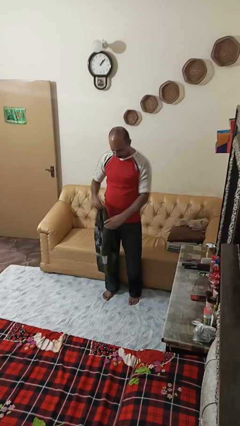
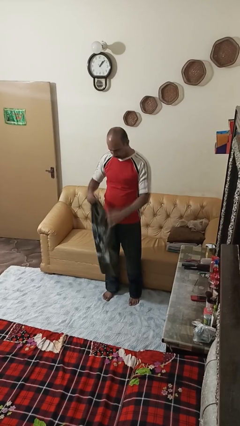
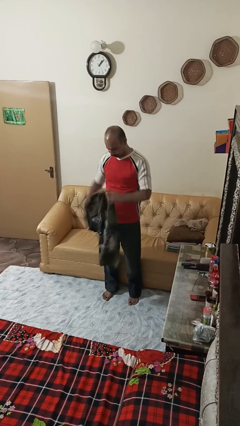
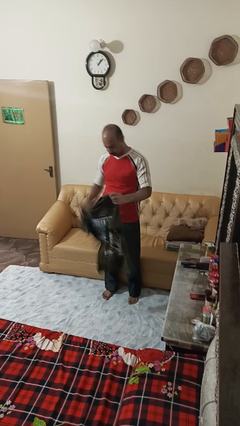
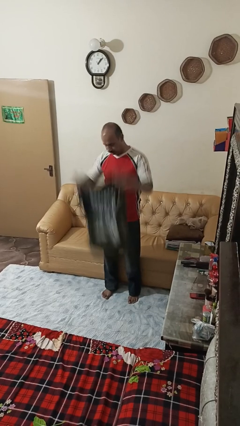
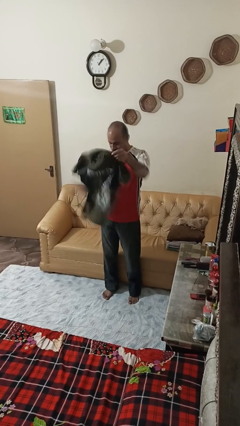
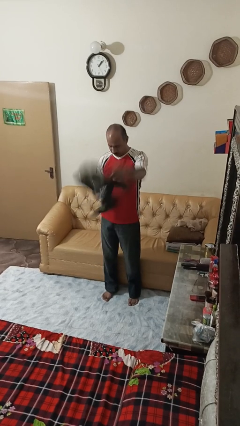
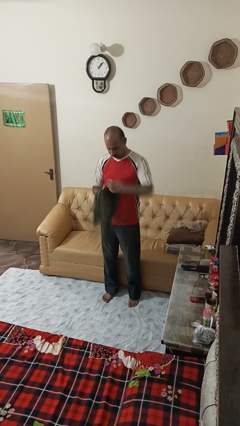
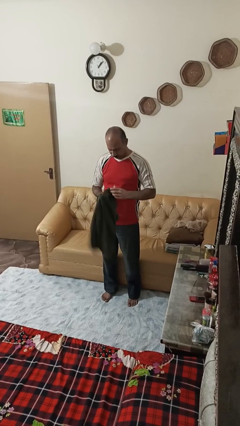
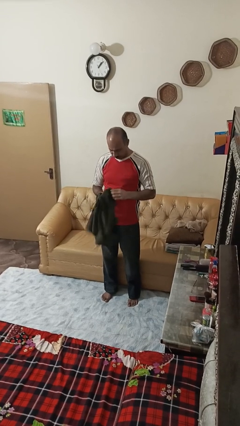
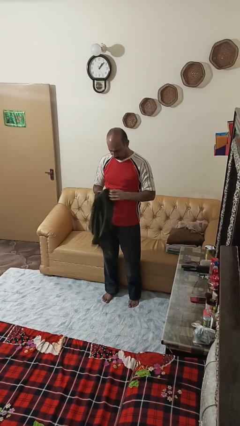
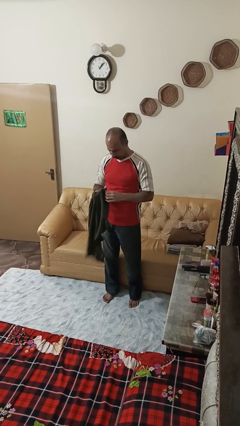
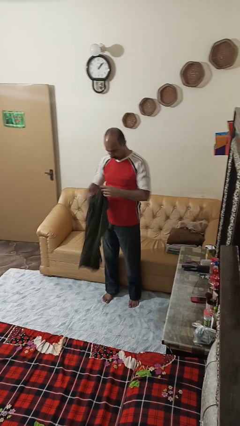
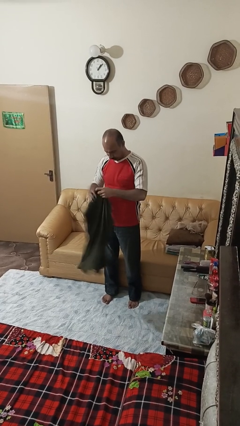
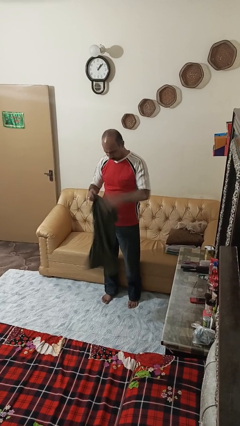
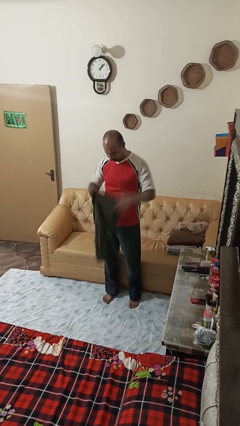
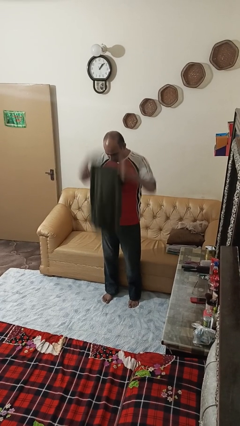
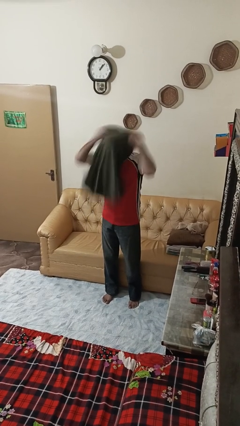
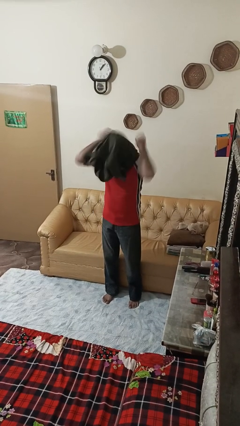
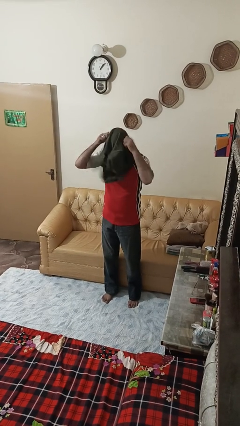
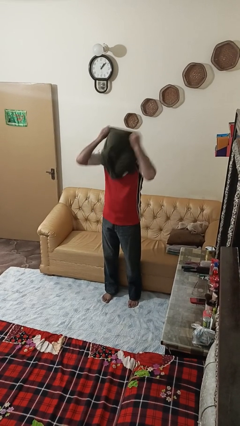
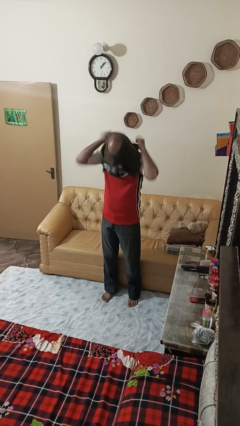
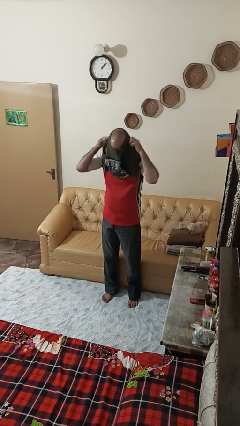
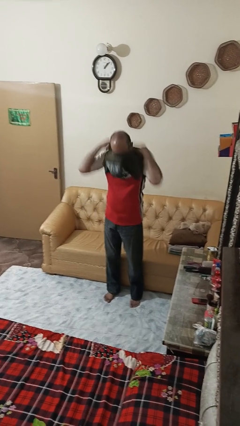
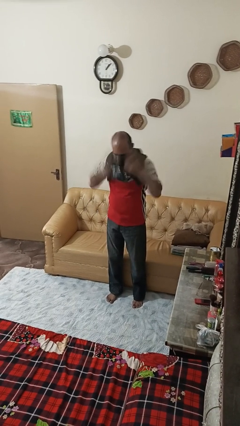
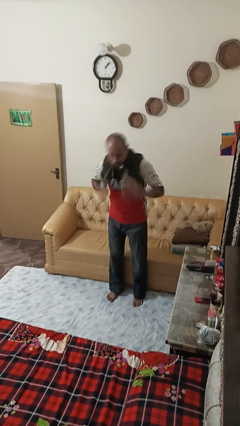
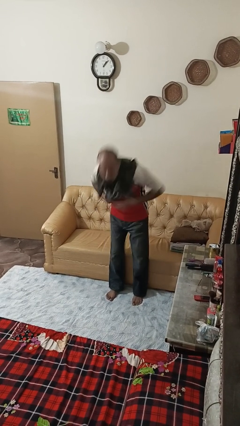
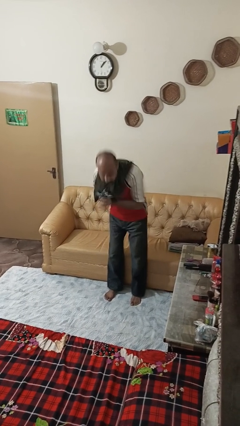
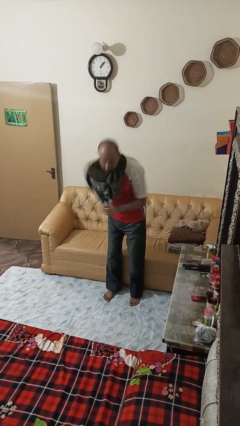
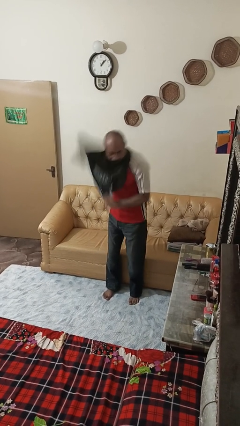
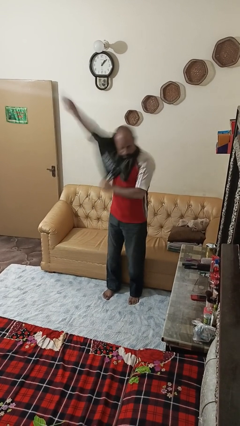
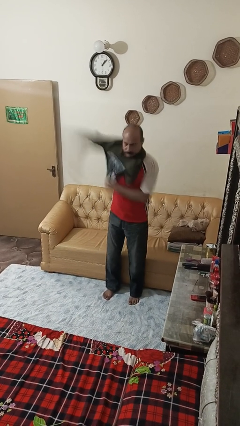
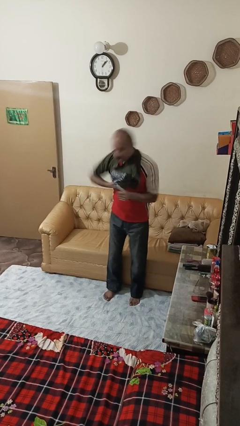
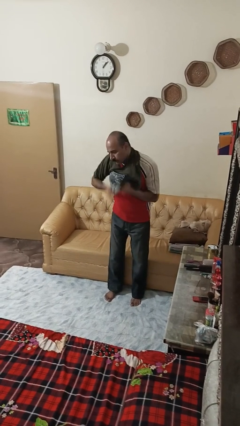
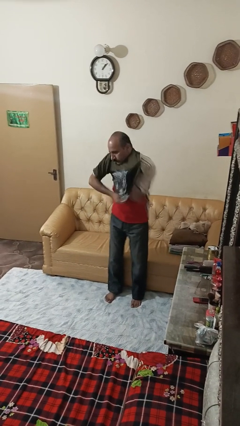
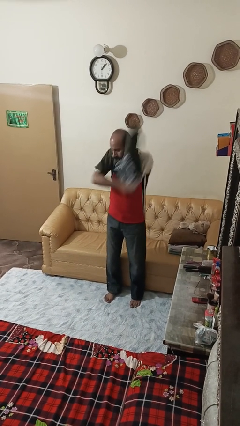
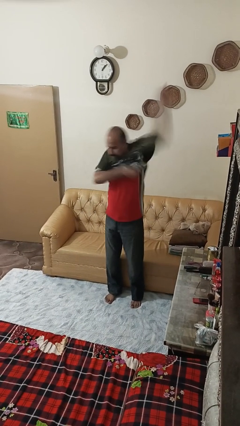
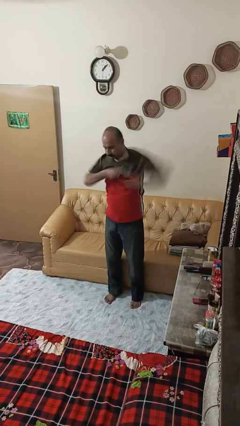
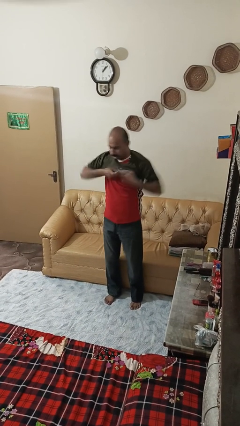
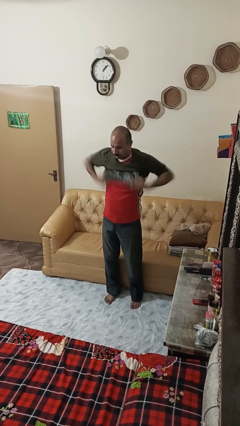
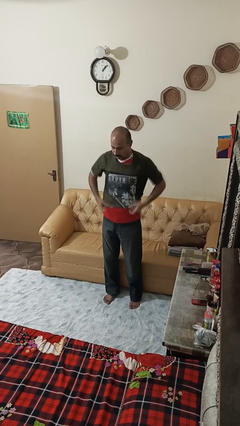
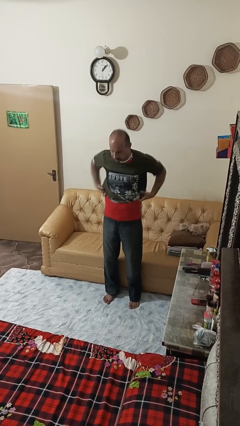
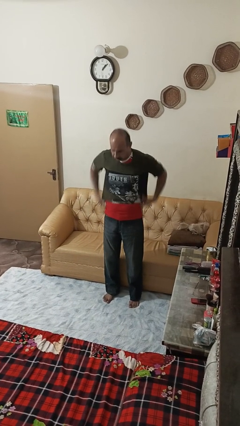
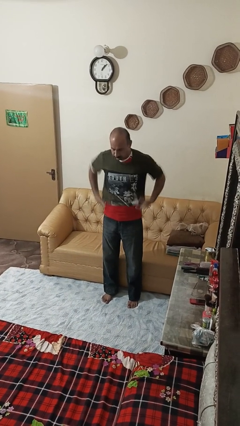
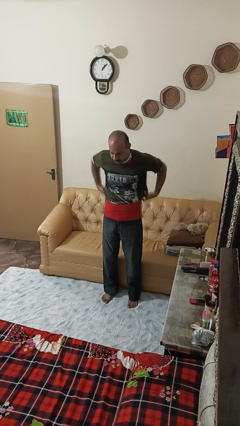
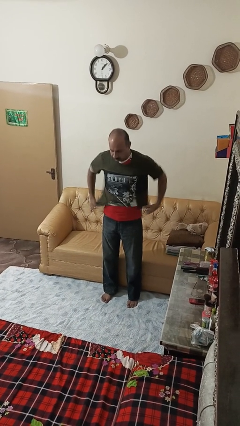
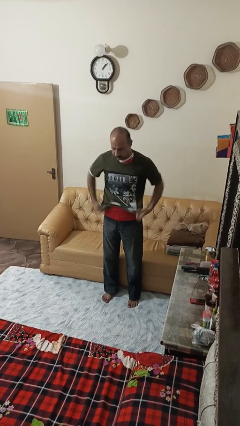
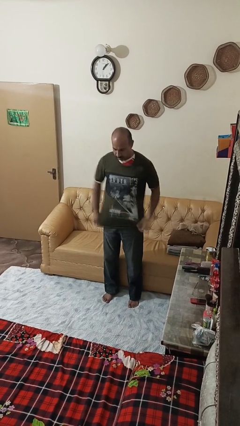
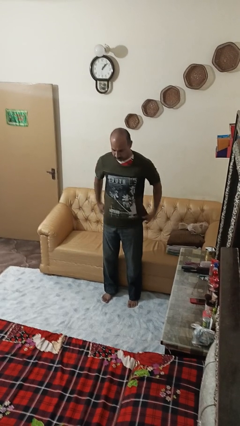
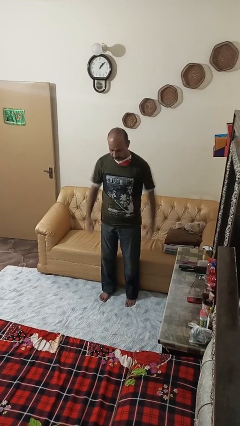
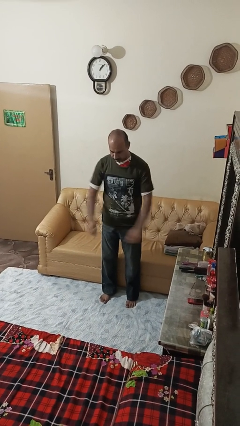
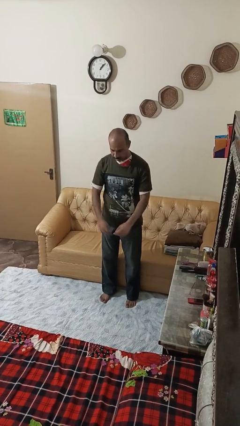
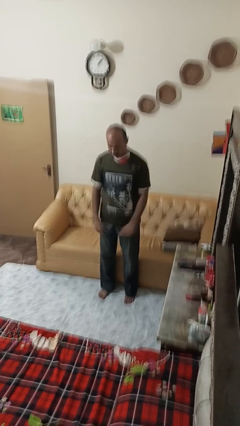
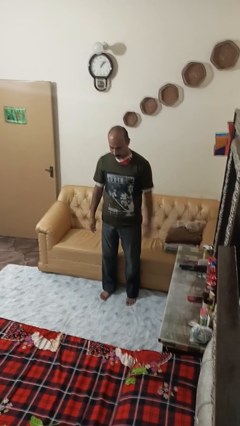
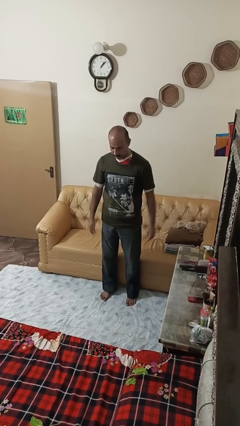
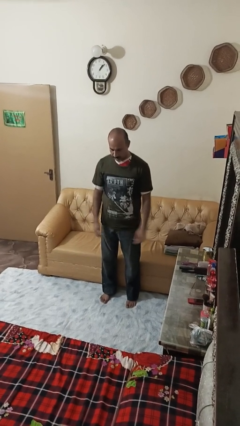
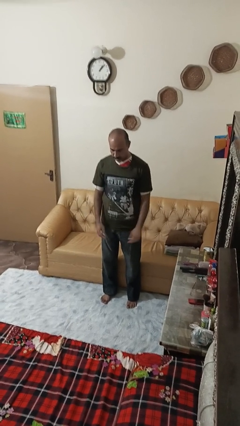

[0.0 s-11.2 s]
person puts on shirt

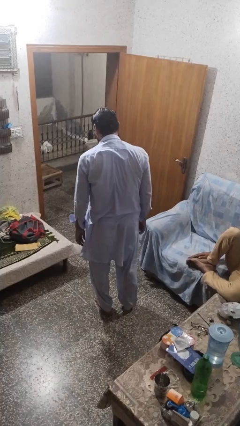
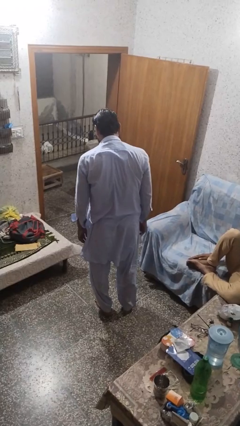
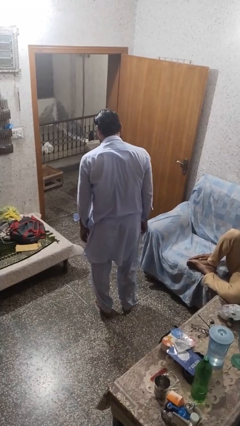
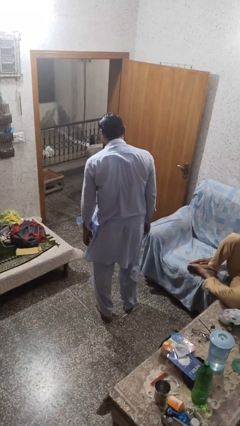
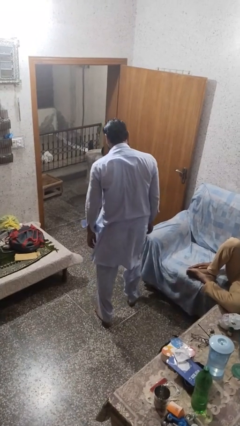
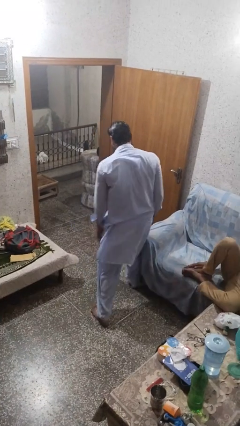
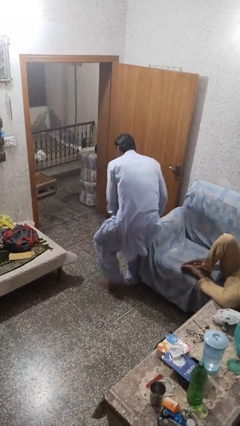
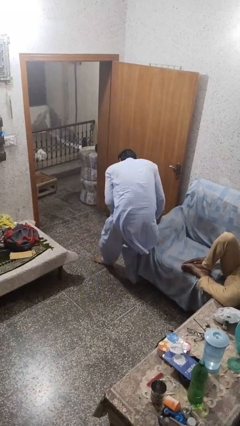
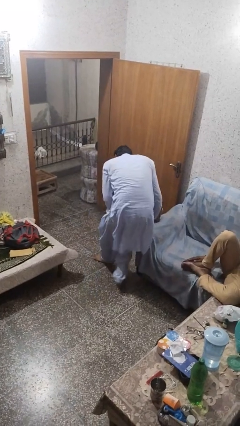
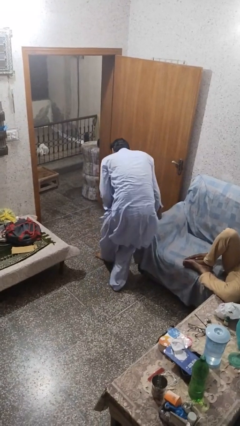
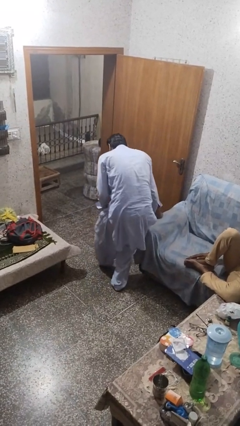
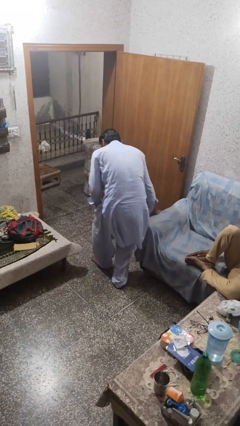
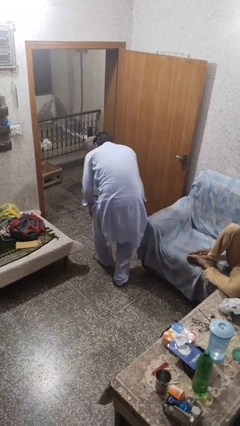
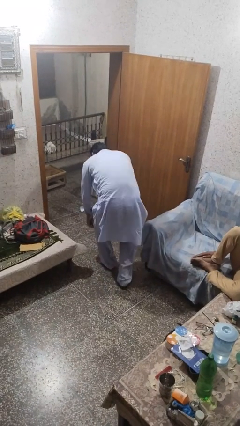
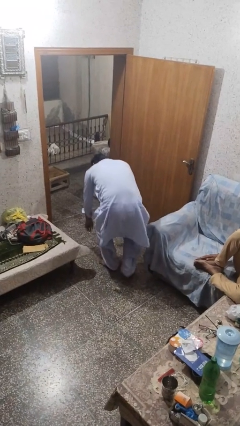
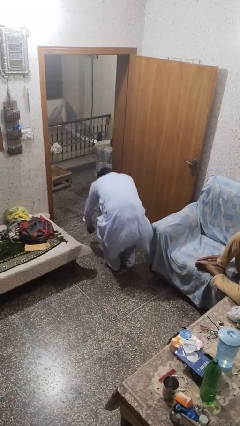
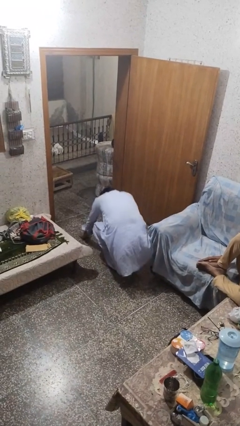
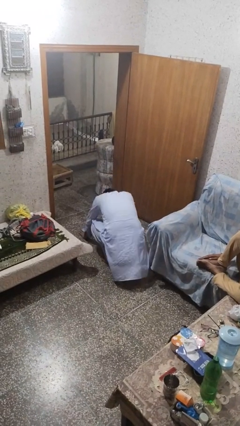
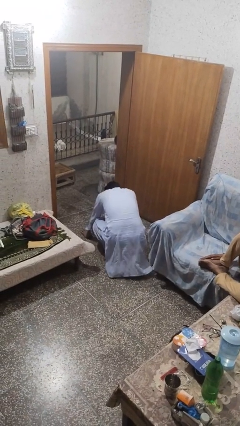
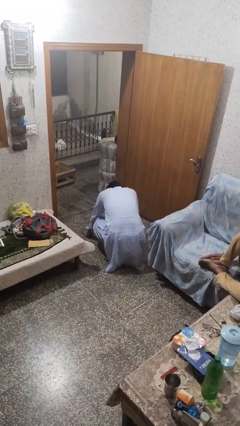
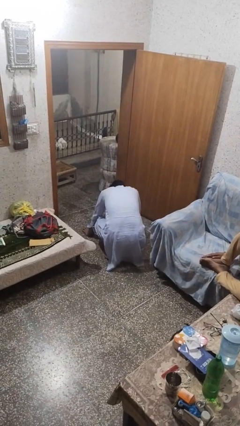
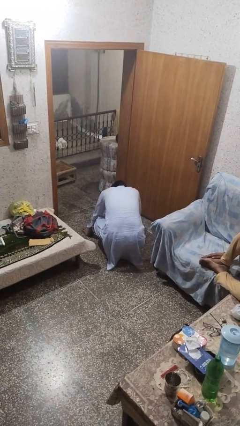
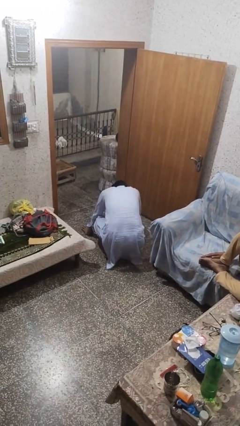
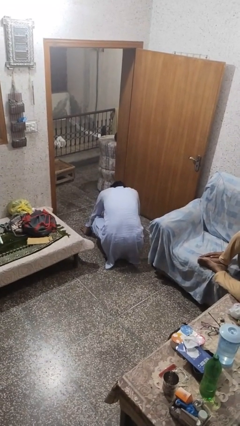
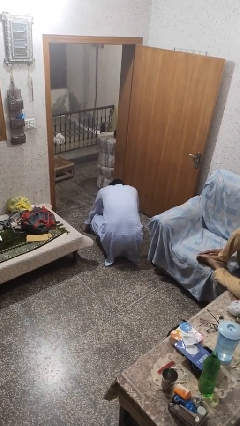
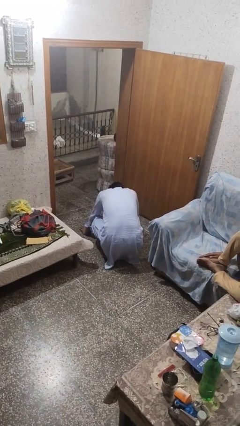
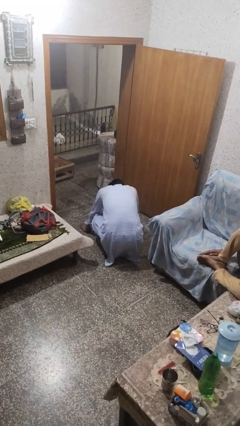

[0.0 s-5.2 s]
person trips on object on floor

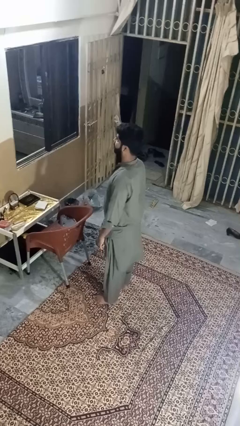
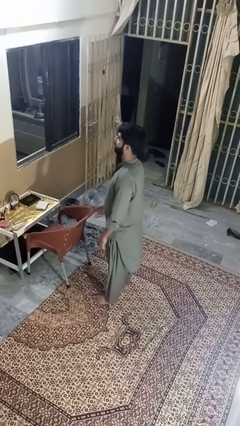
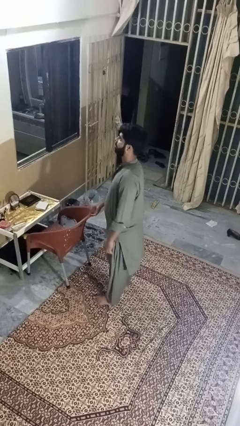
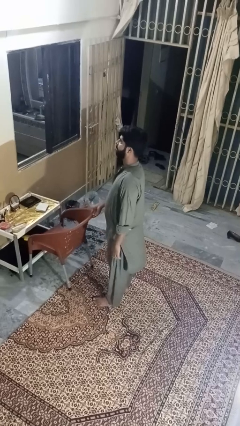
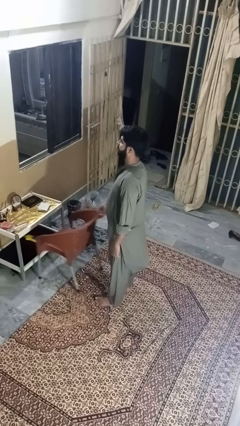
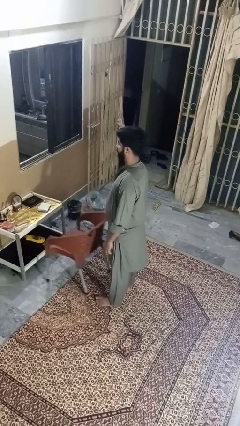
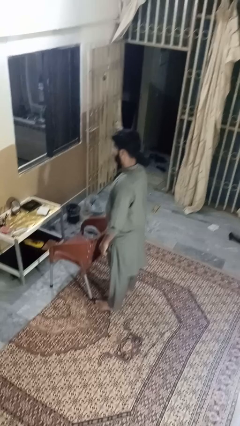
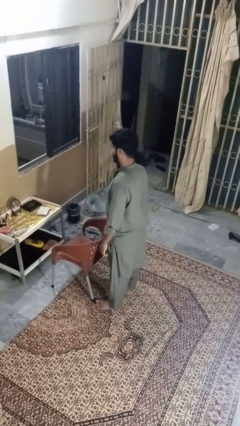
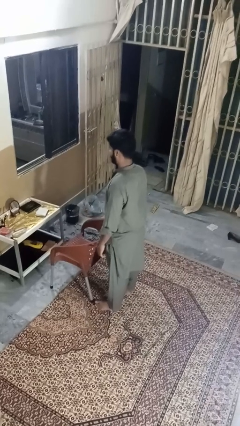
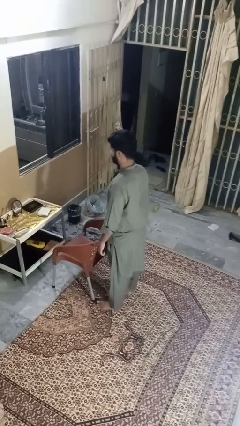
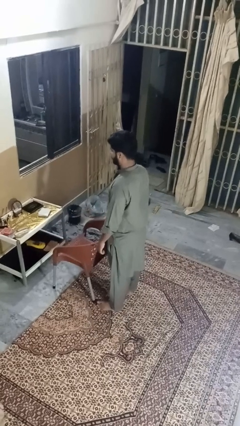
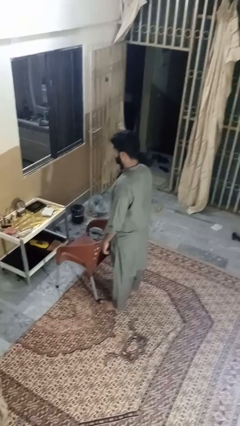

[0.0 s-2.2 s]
person pulls out chair
